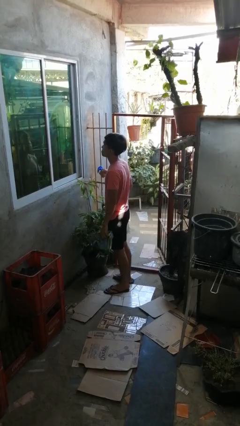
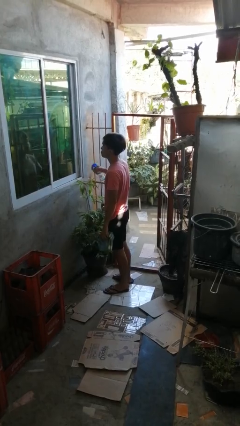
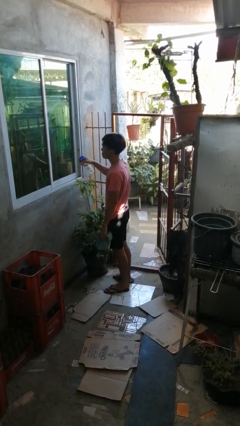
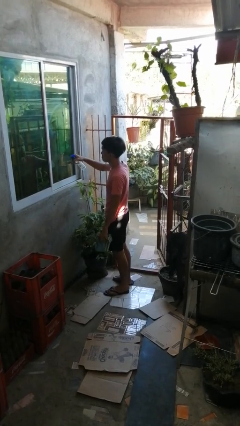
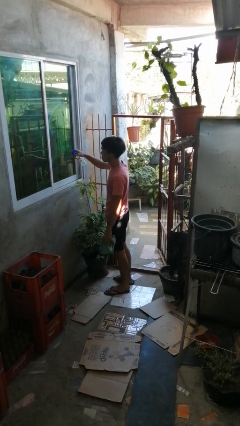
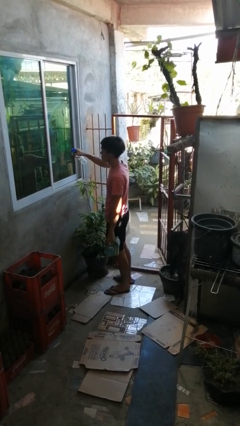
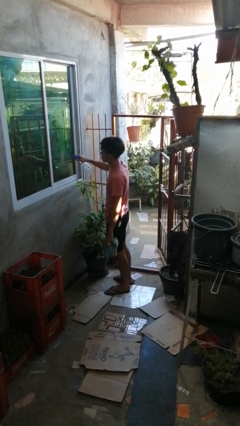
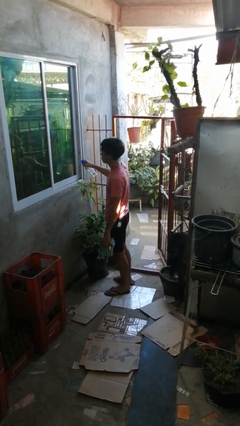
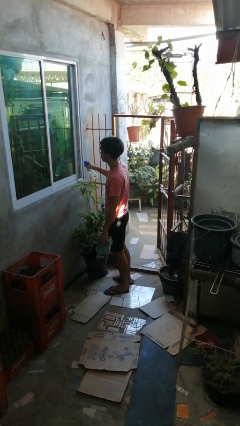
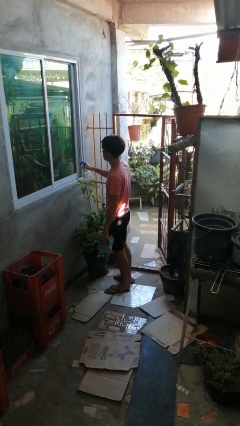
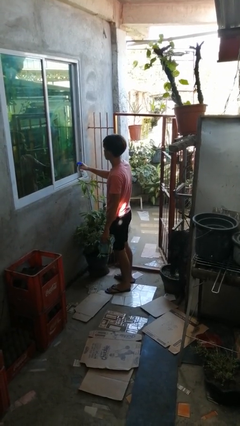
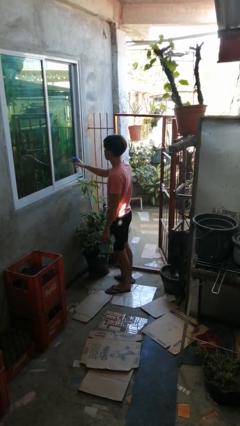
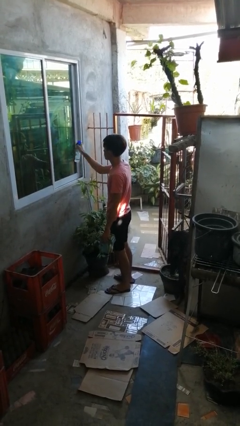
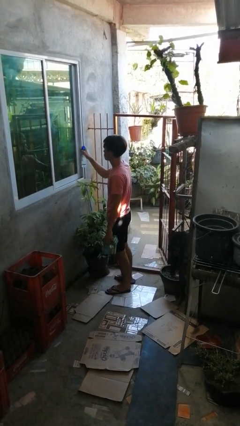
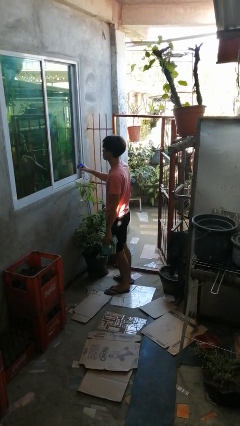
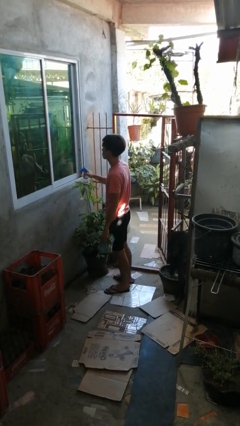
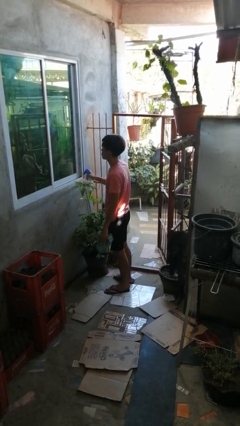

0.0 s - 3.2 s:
person sprays from bottle

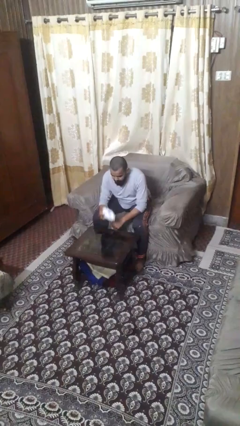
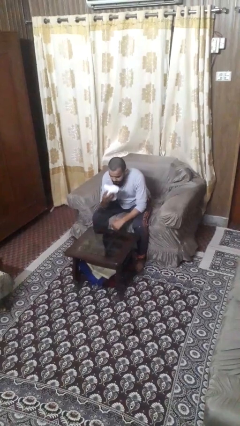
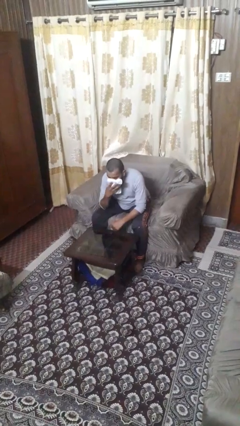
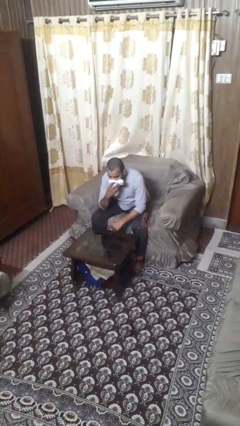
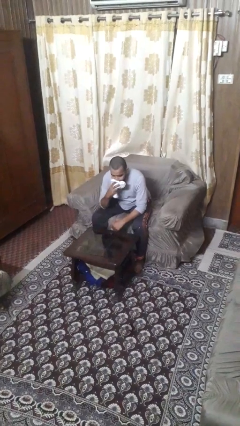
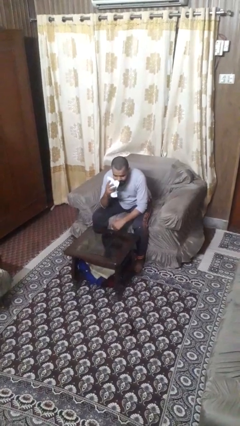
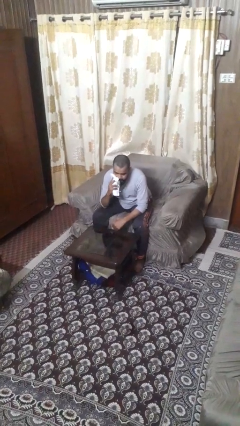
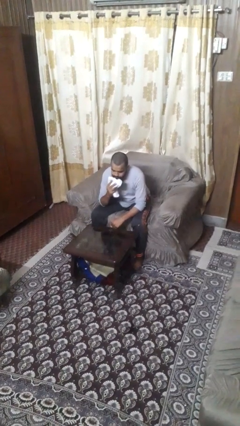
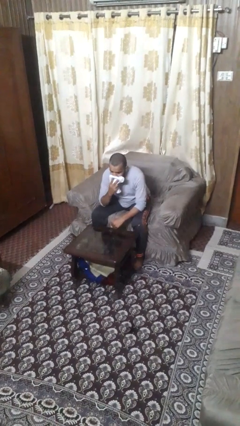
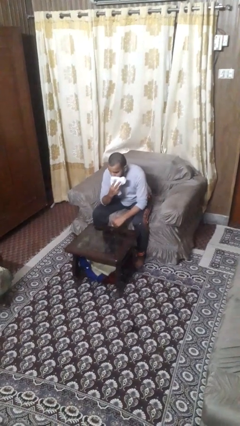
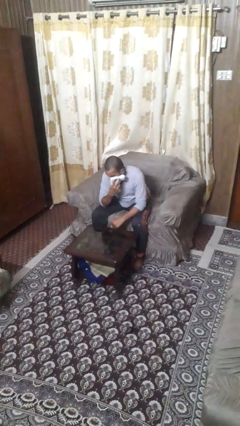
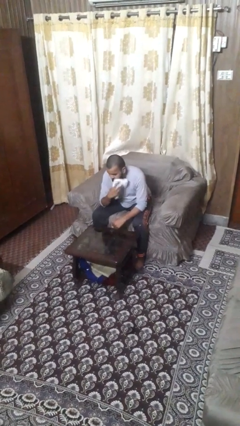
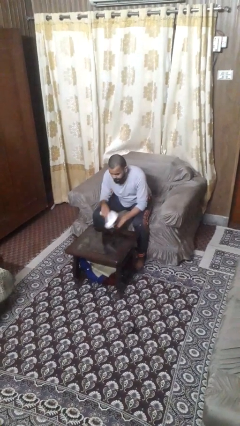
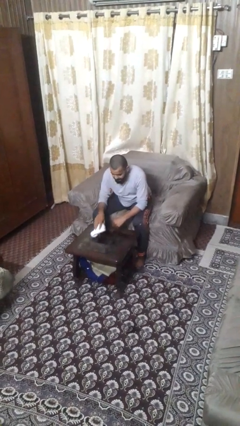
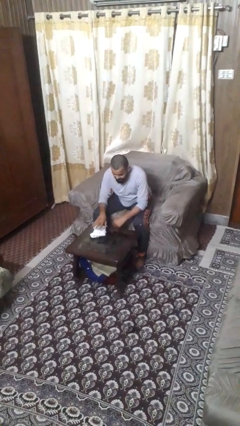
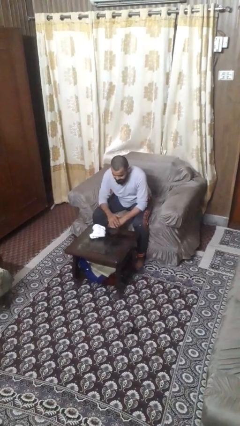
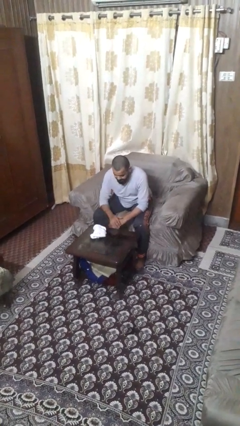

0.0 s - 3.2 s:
person wipes mouth with napkin

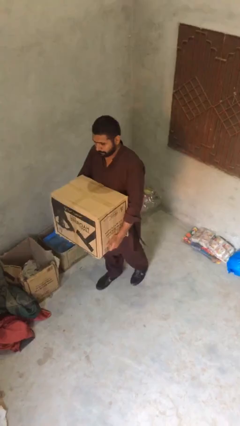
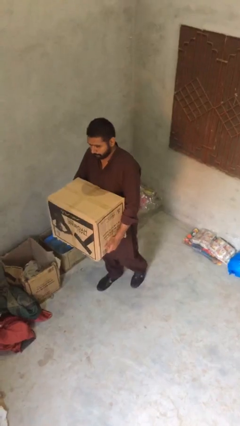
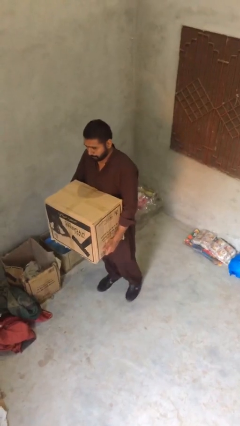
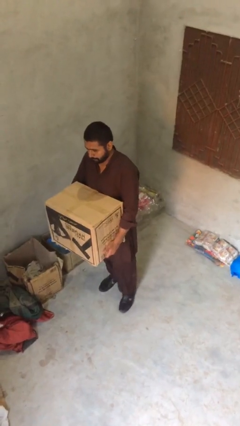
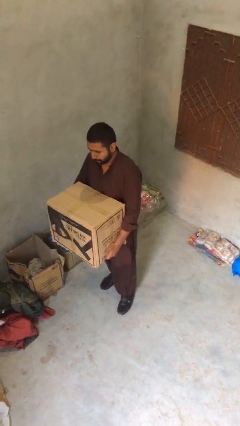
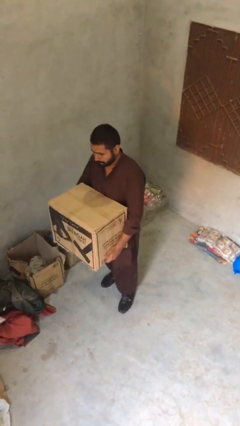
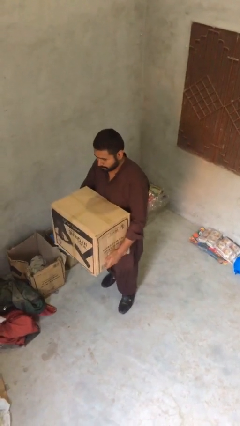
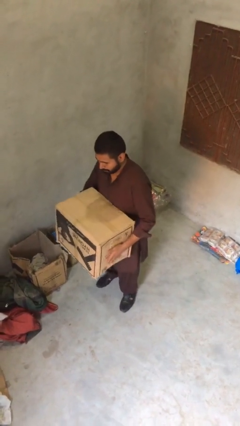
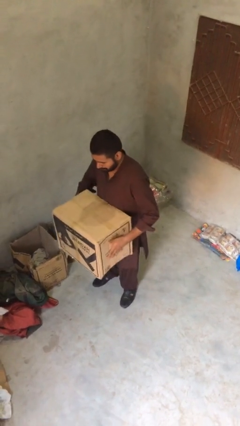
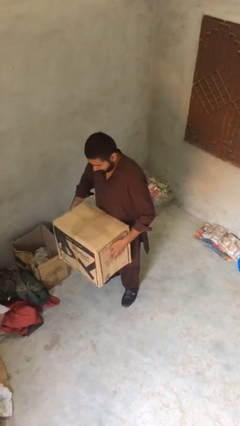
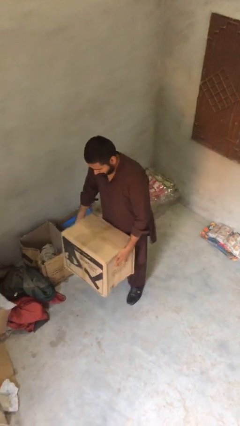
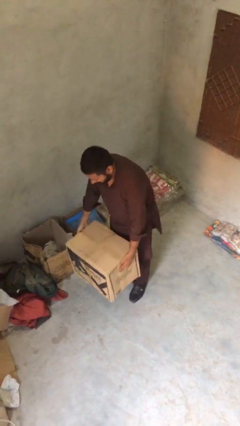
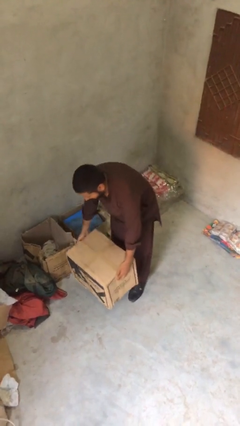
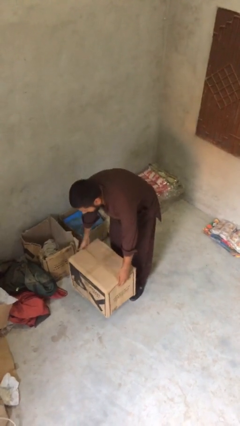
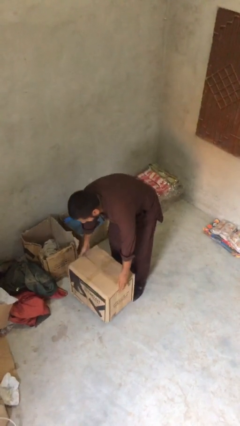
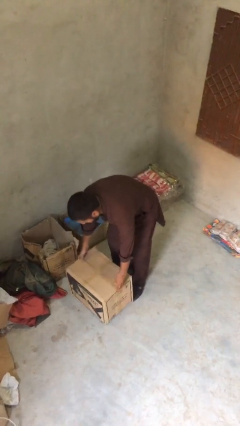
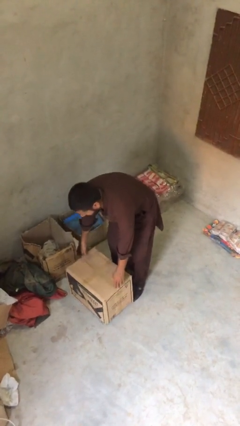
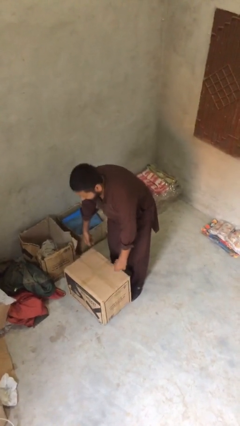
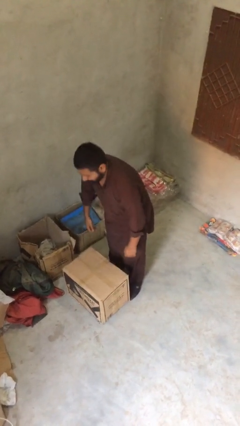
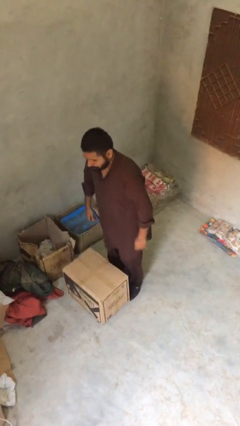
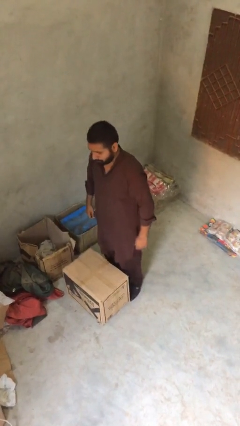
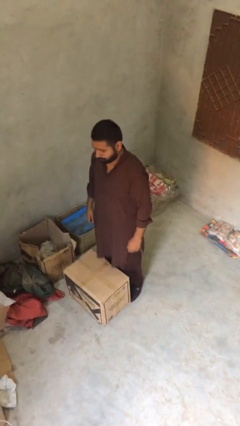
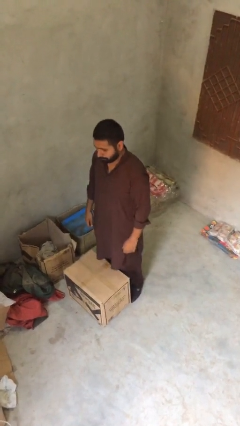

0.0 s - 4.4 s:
person puts down object on floor

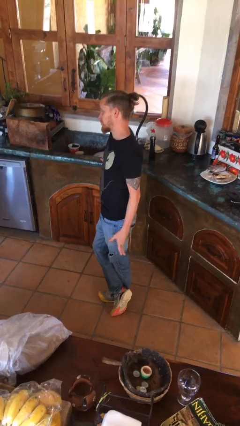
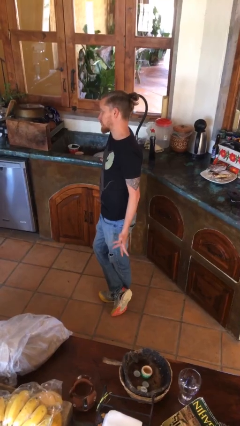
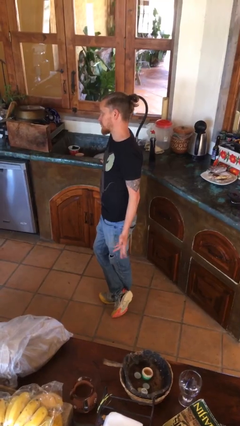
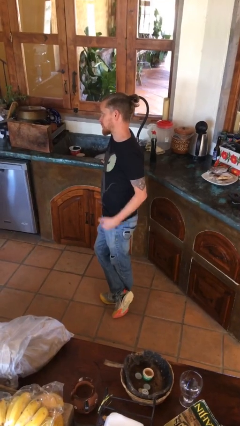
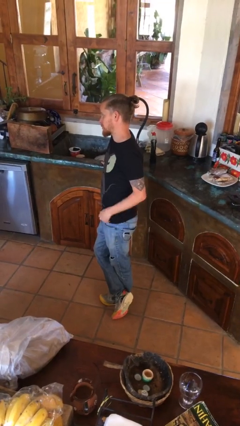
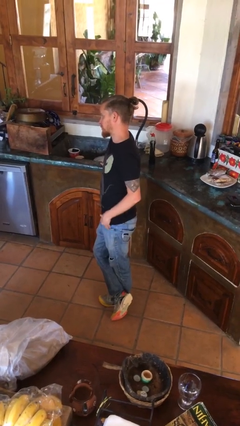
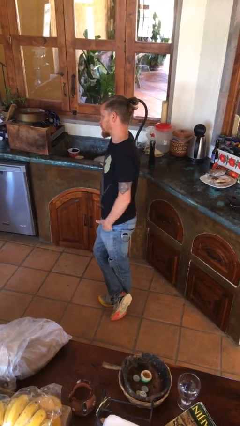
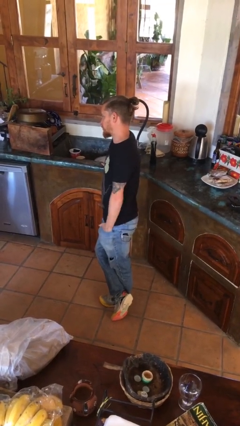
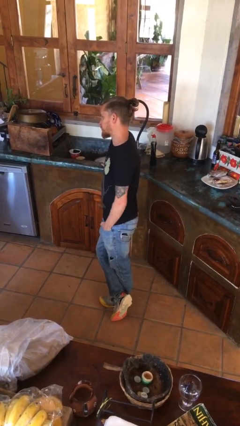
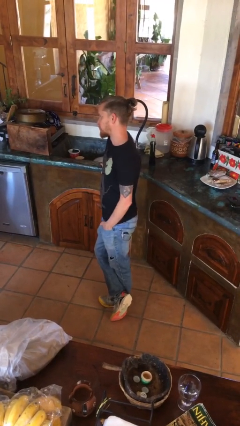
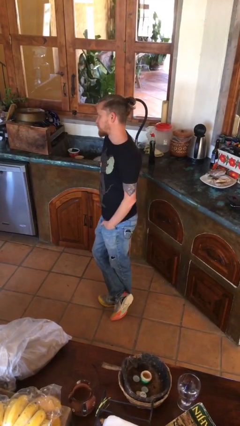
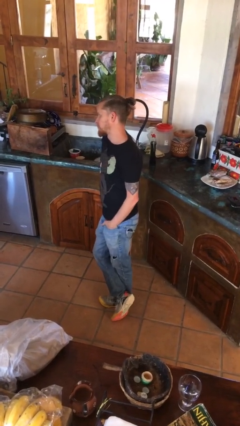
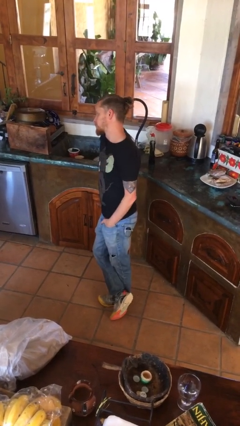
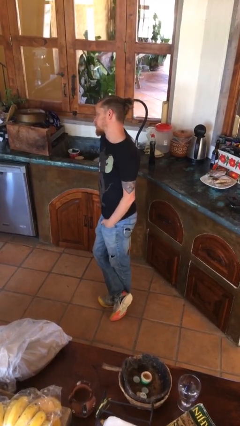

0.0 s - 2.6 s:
person puts hands in back pockets

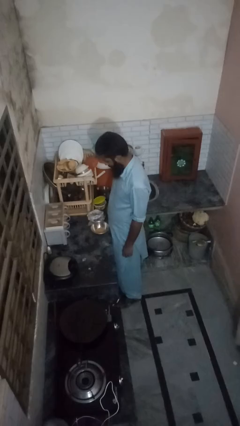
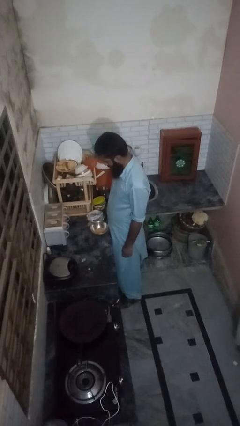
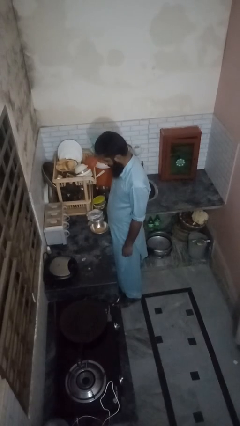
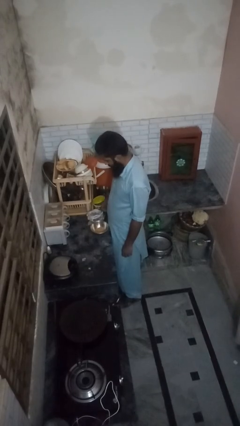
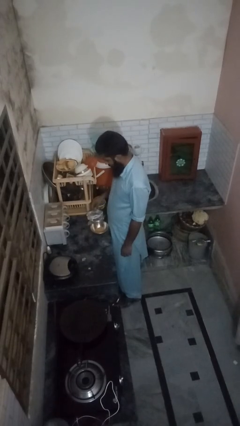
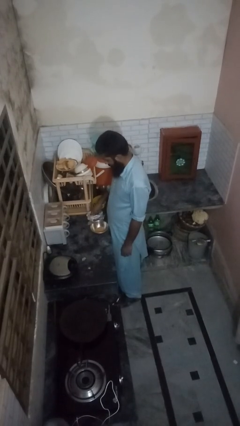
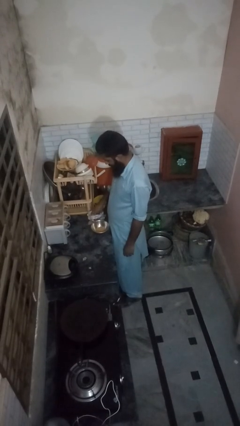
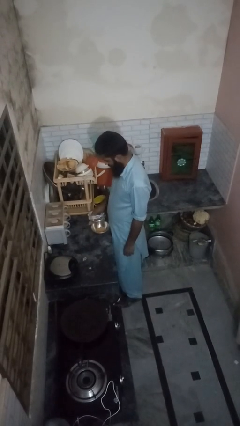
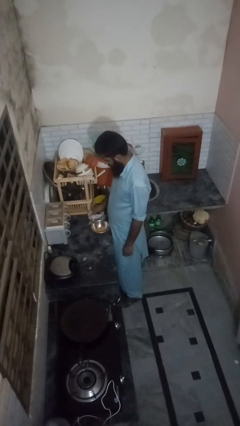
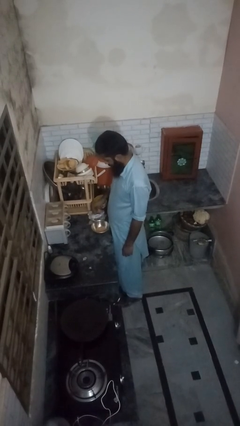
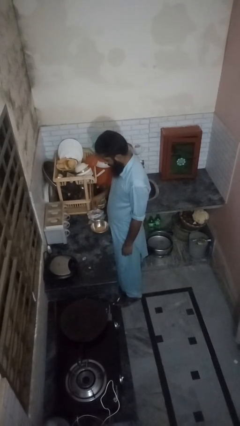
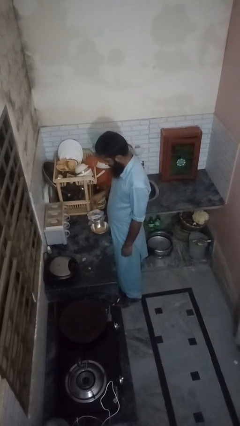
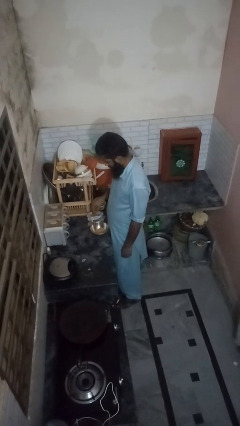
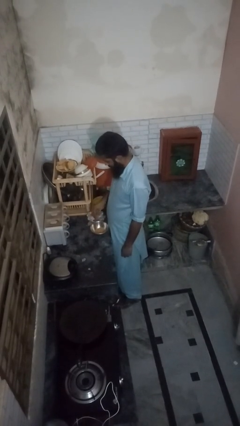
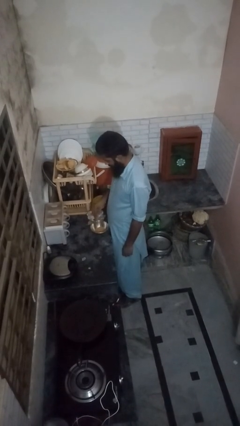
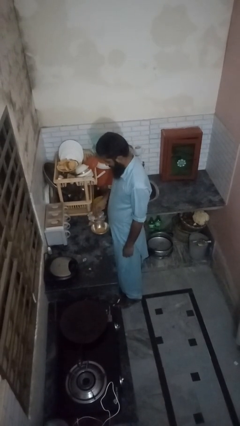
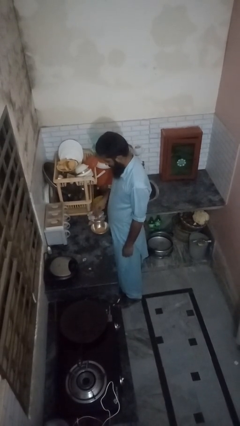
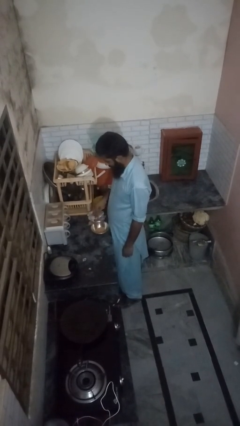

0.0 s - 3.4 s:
person pours into bowl

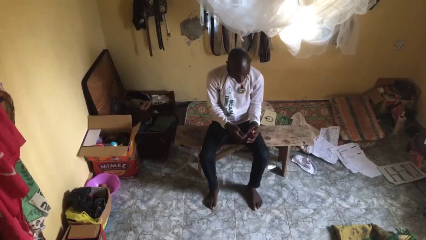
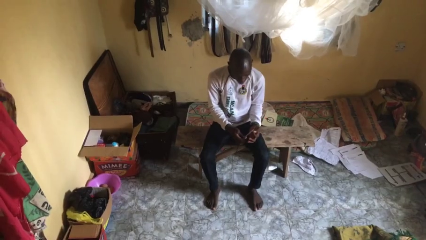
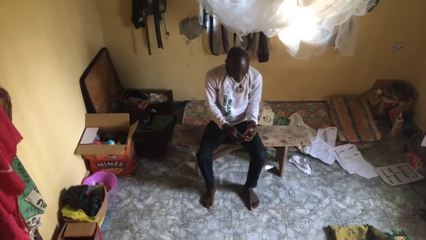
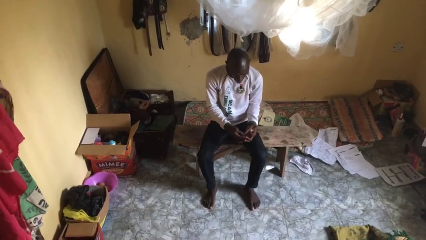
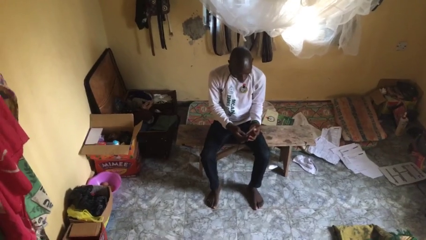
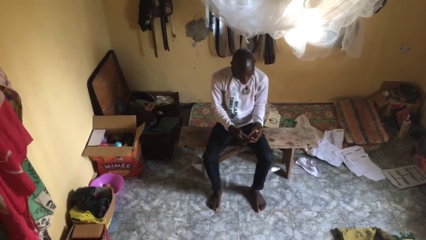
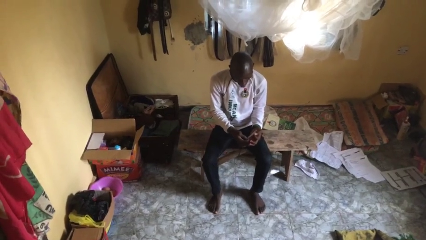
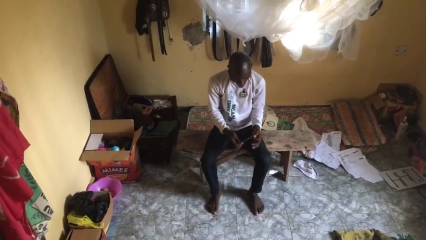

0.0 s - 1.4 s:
person files fingernails
